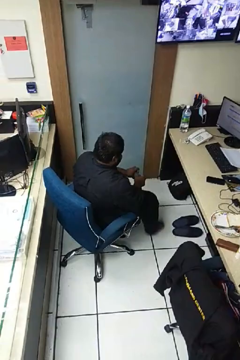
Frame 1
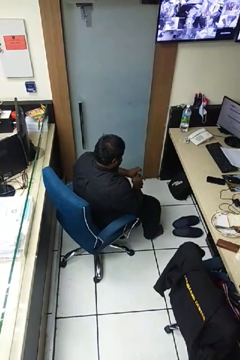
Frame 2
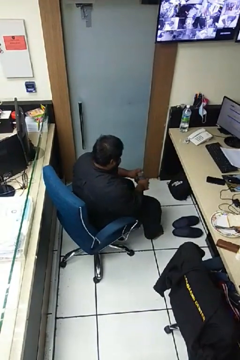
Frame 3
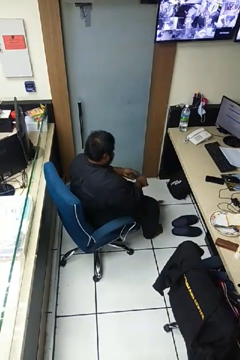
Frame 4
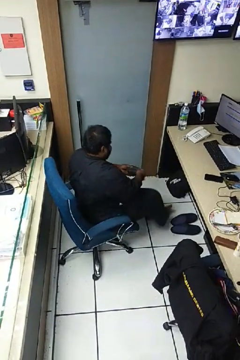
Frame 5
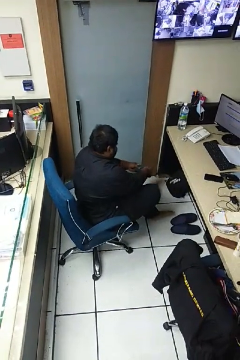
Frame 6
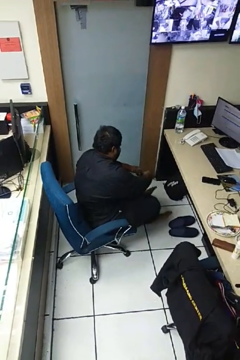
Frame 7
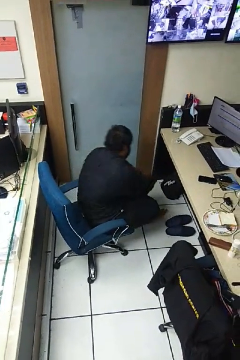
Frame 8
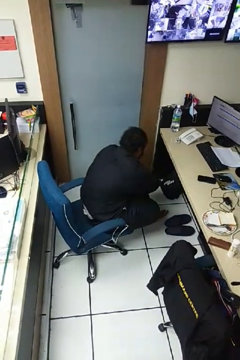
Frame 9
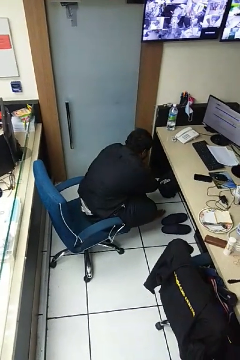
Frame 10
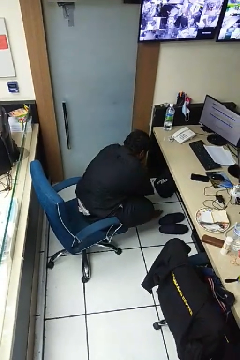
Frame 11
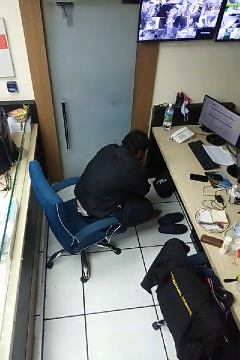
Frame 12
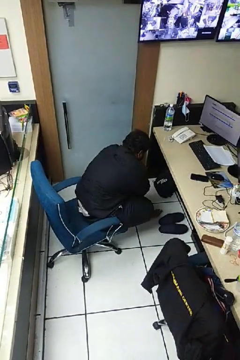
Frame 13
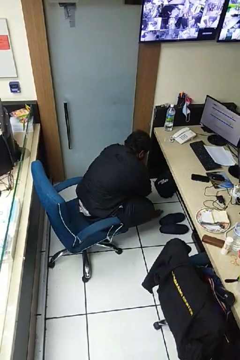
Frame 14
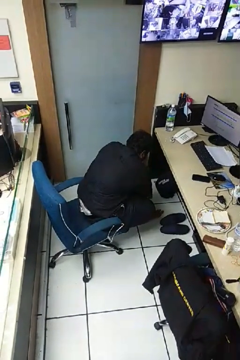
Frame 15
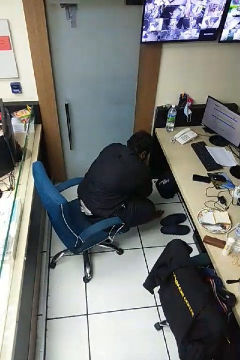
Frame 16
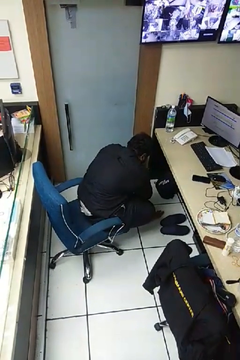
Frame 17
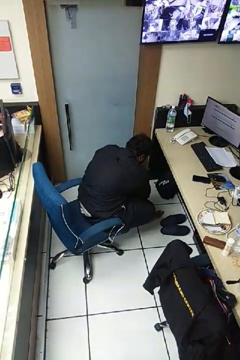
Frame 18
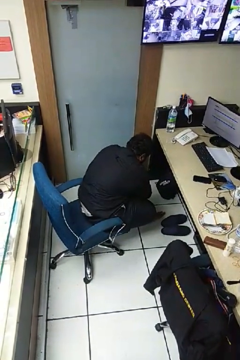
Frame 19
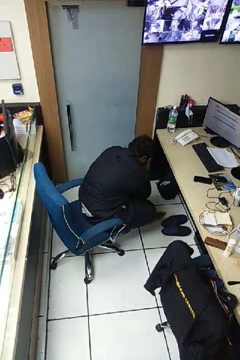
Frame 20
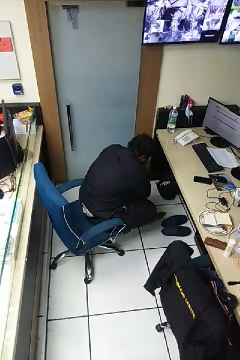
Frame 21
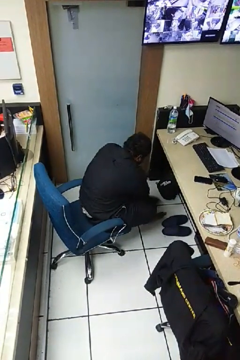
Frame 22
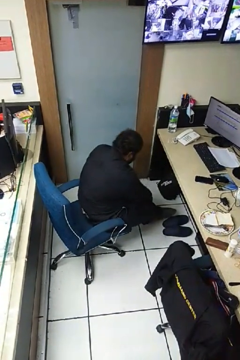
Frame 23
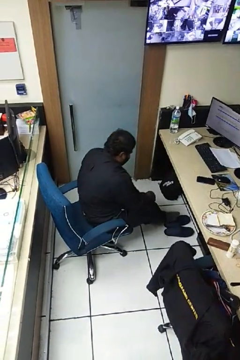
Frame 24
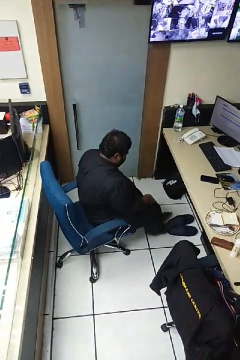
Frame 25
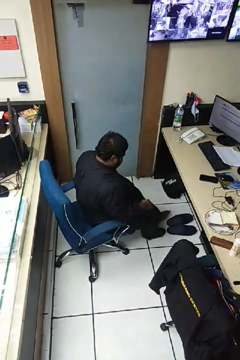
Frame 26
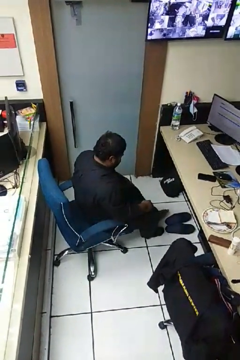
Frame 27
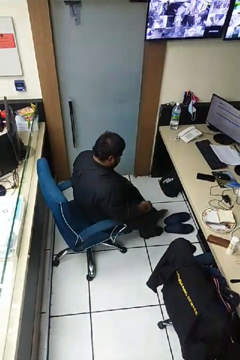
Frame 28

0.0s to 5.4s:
person puts on socks

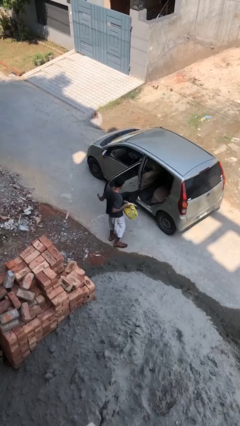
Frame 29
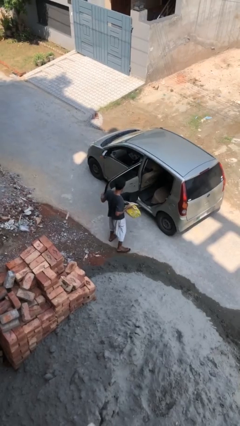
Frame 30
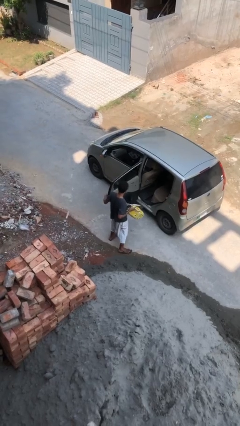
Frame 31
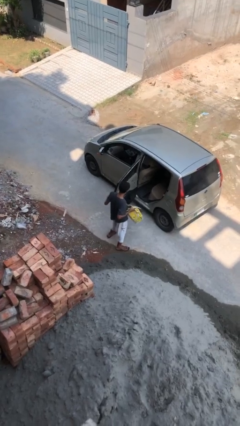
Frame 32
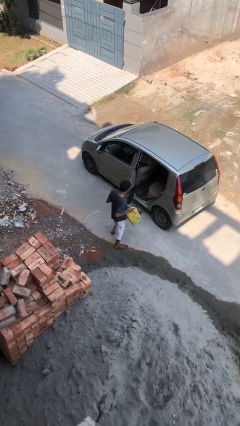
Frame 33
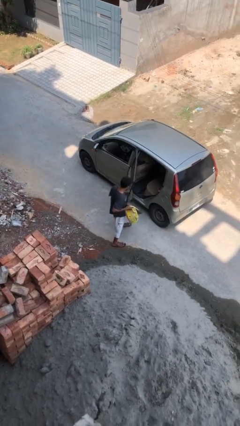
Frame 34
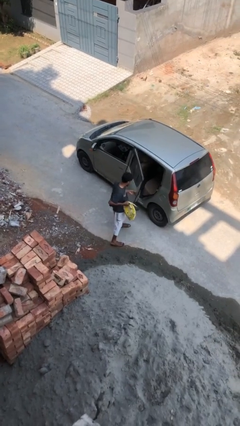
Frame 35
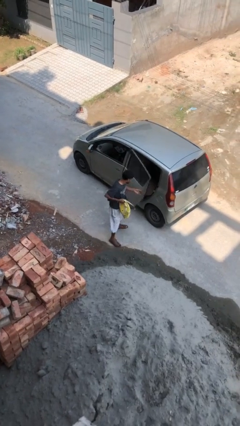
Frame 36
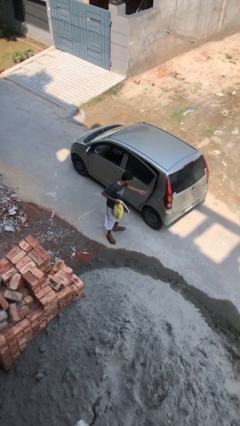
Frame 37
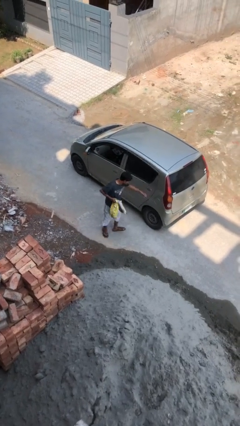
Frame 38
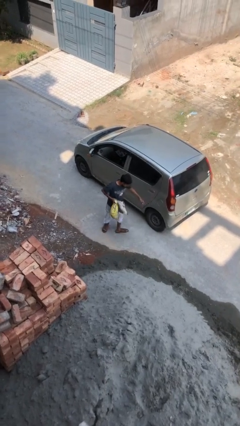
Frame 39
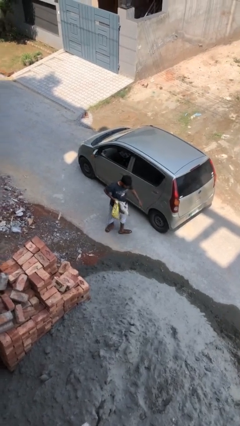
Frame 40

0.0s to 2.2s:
person closes car door

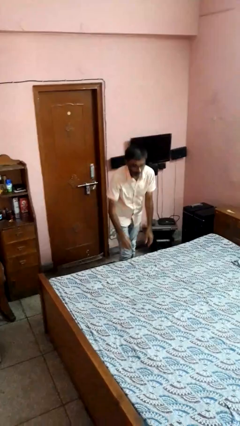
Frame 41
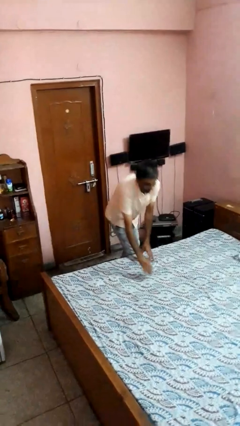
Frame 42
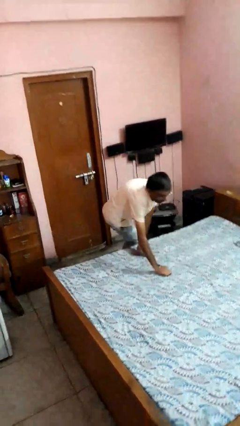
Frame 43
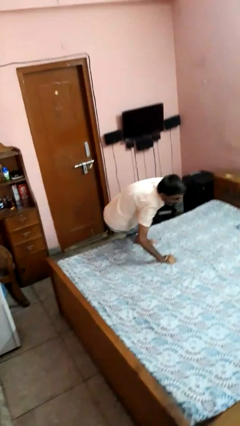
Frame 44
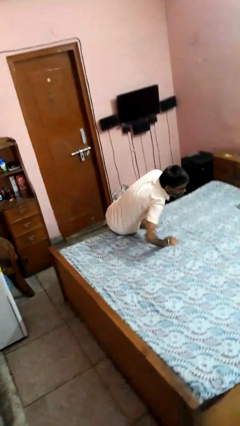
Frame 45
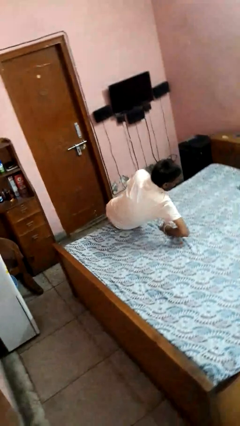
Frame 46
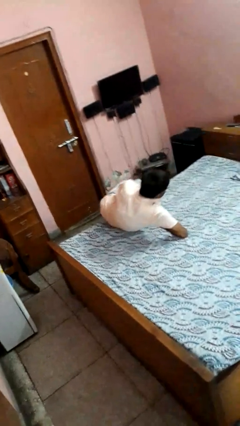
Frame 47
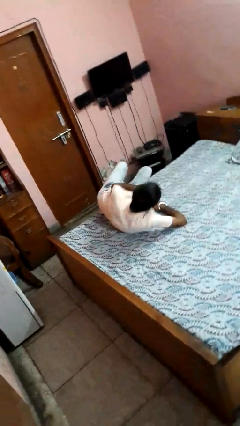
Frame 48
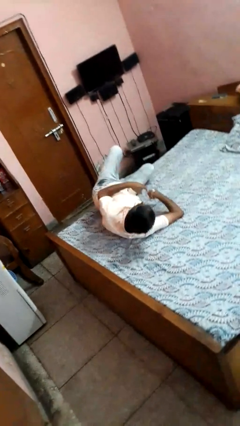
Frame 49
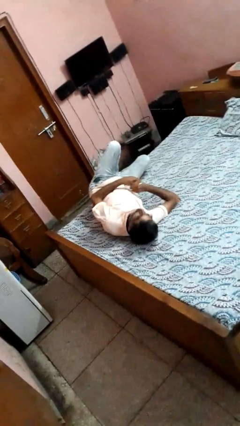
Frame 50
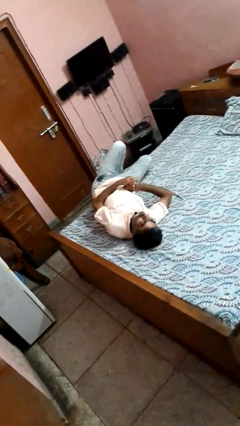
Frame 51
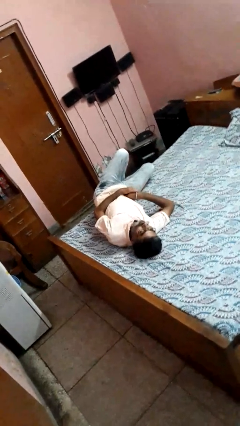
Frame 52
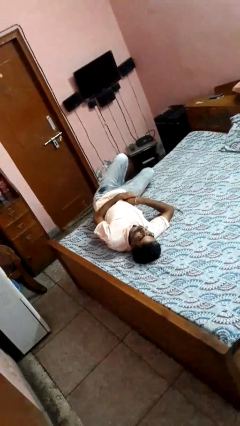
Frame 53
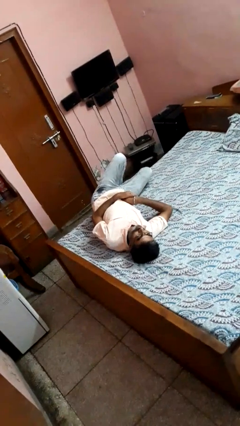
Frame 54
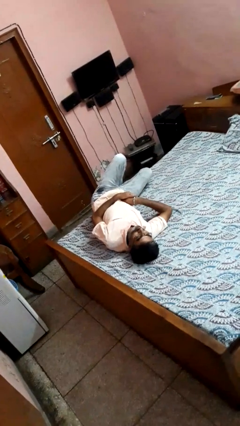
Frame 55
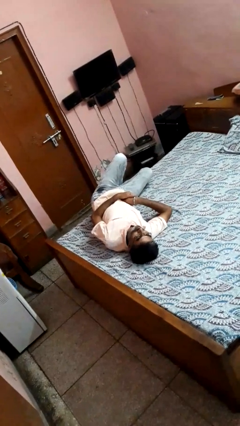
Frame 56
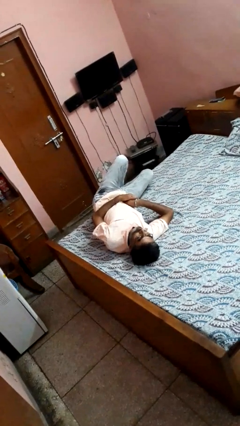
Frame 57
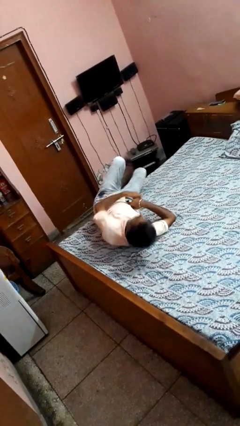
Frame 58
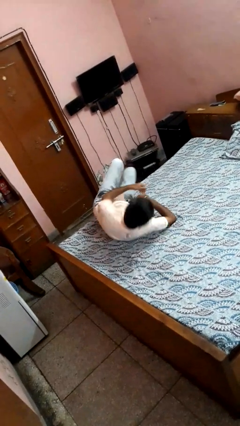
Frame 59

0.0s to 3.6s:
person lies down on bed

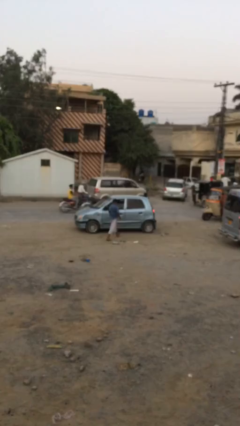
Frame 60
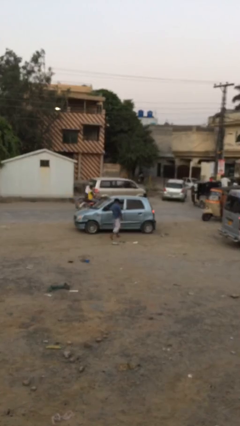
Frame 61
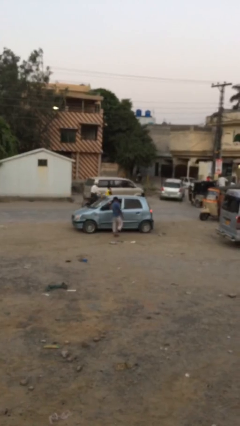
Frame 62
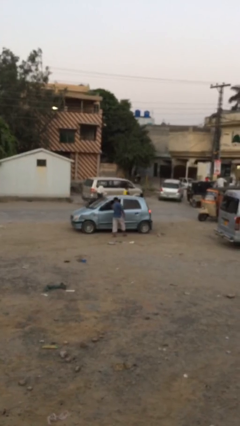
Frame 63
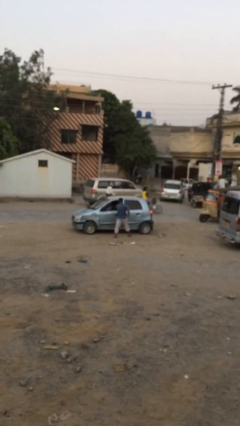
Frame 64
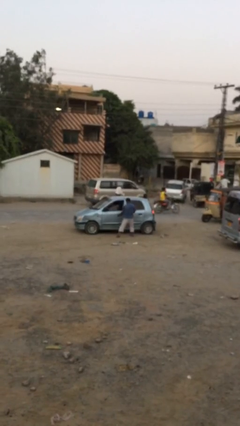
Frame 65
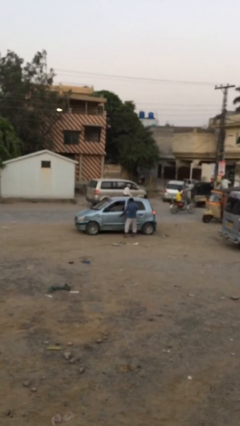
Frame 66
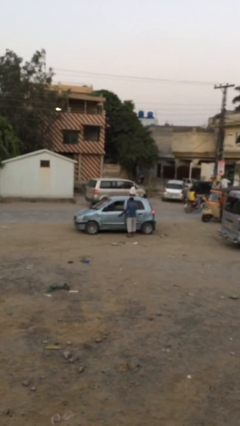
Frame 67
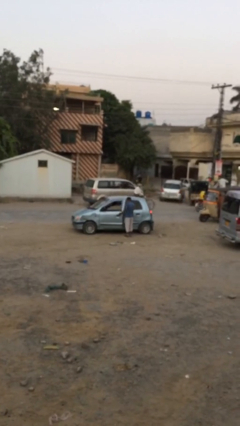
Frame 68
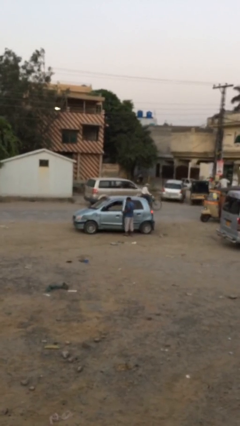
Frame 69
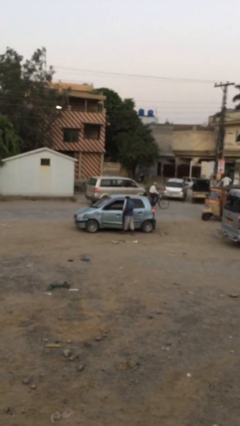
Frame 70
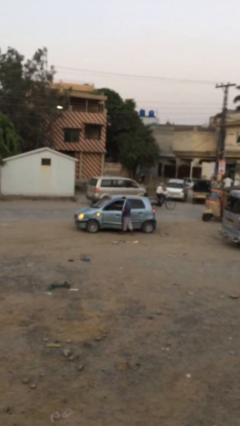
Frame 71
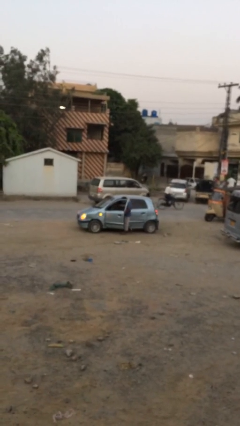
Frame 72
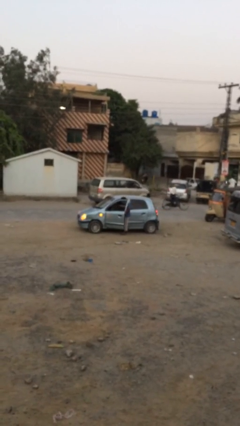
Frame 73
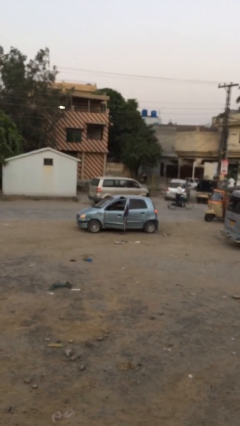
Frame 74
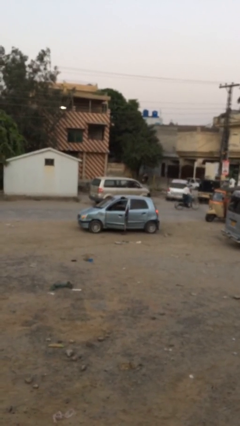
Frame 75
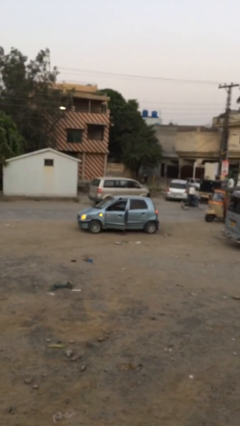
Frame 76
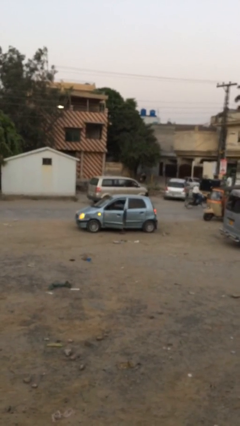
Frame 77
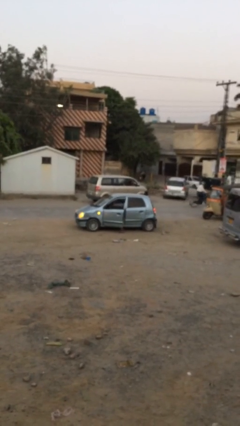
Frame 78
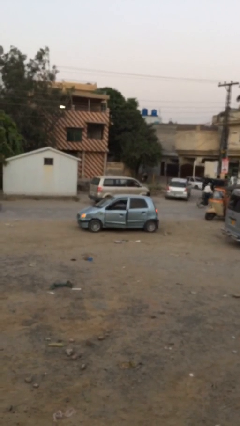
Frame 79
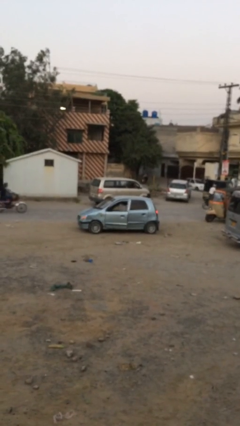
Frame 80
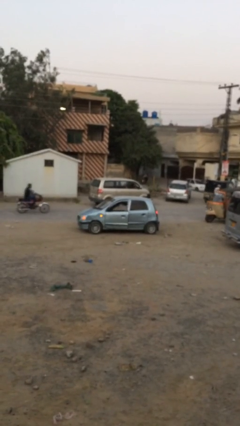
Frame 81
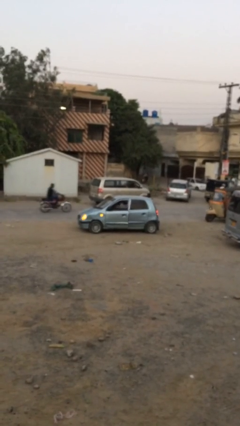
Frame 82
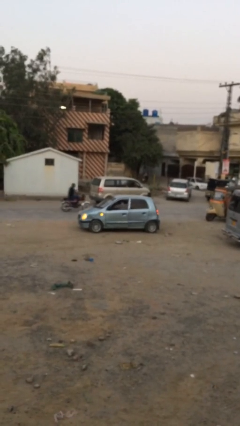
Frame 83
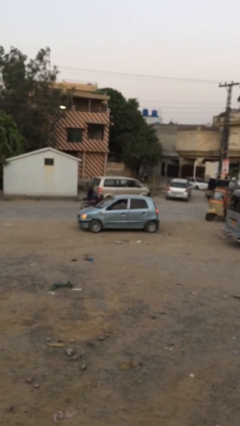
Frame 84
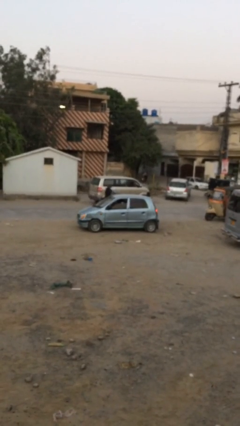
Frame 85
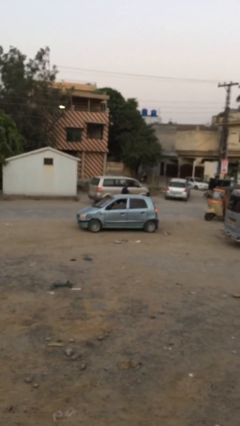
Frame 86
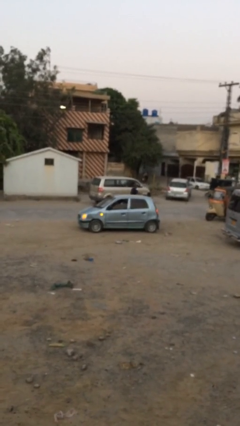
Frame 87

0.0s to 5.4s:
car picks up person

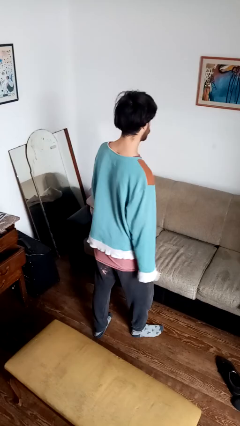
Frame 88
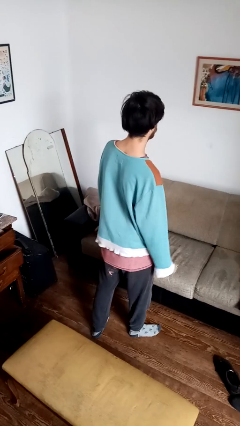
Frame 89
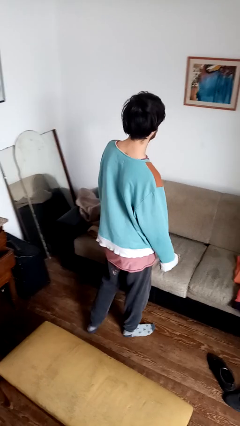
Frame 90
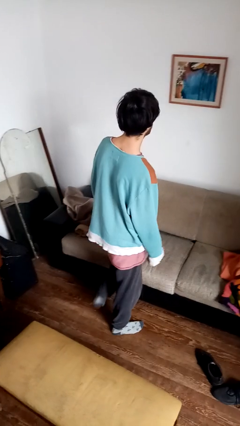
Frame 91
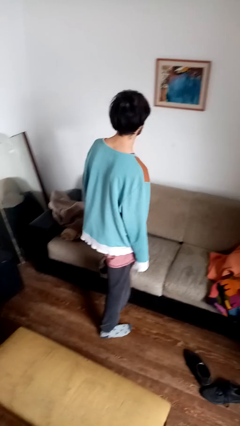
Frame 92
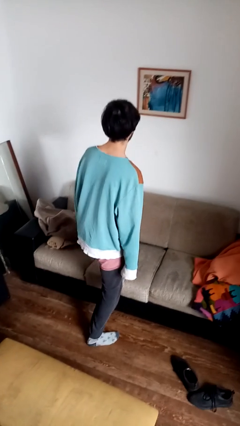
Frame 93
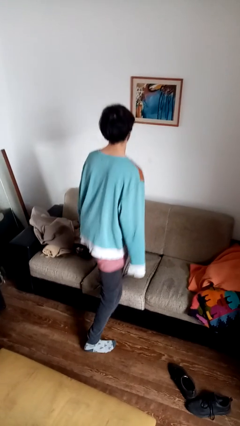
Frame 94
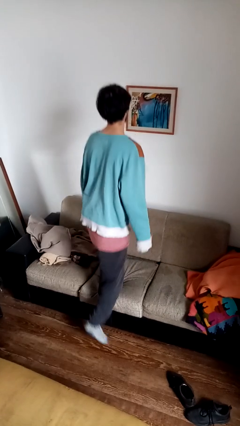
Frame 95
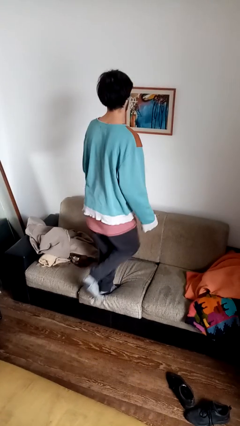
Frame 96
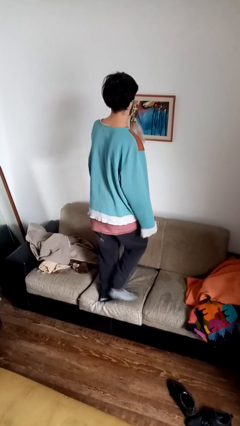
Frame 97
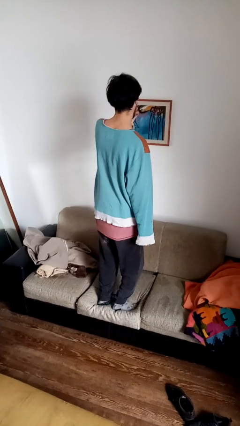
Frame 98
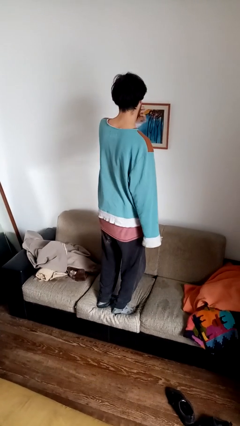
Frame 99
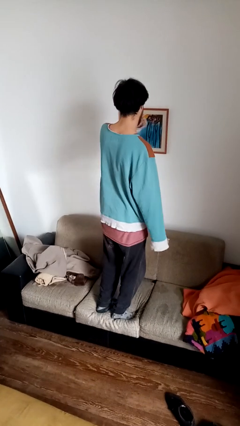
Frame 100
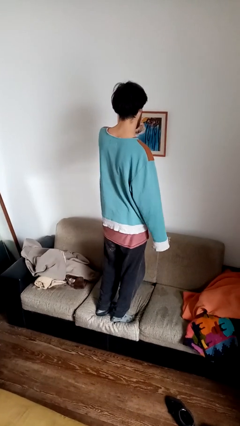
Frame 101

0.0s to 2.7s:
person climbs on couch
